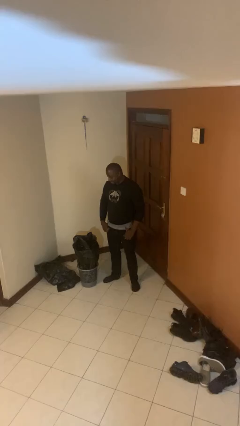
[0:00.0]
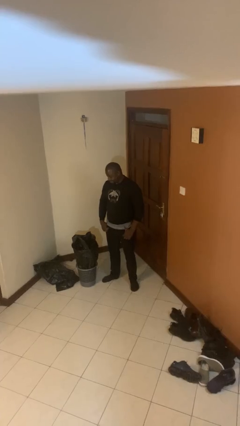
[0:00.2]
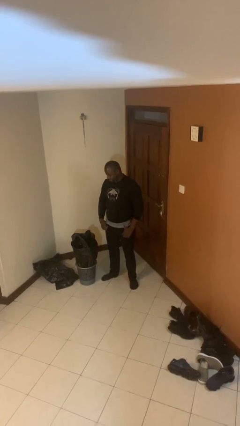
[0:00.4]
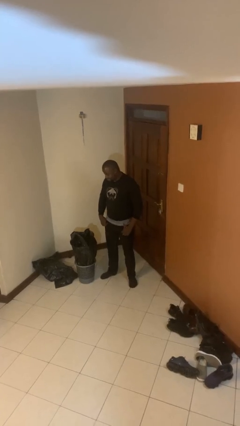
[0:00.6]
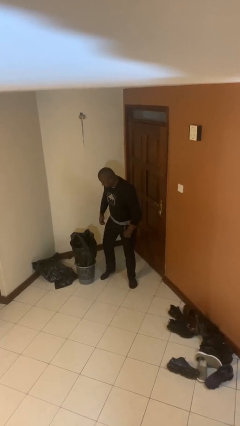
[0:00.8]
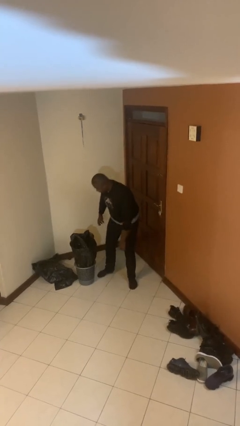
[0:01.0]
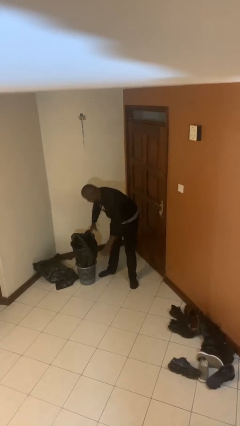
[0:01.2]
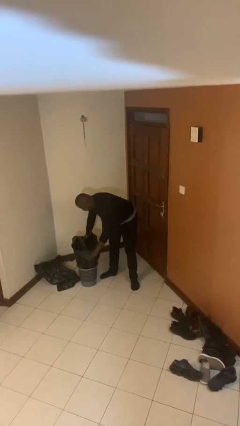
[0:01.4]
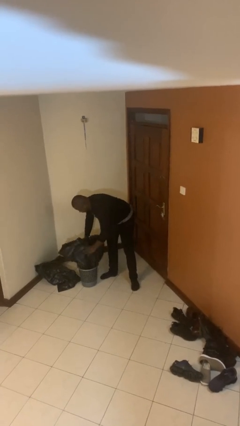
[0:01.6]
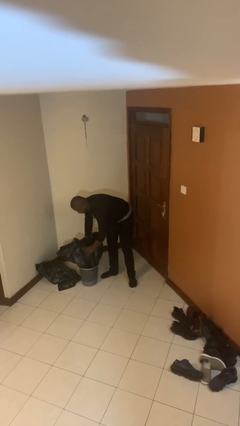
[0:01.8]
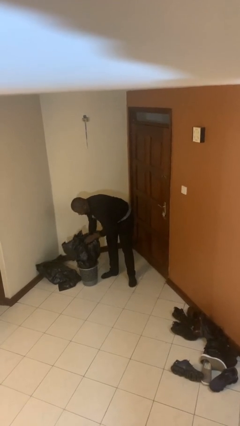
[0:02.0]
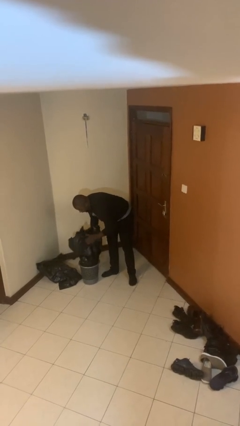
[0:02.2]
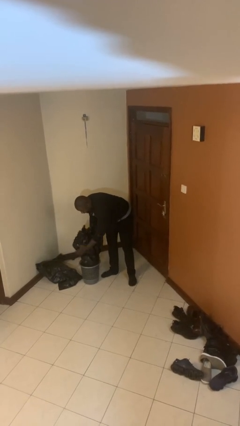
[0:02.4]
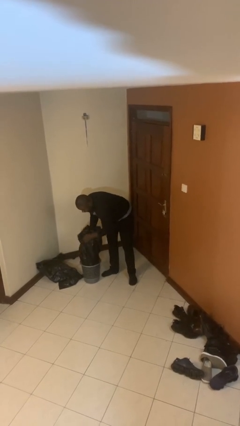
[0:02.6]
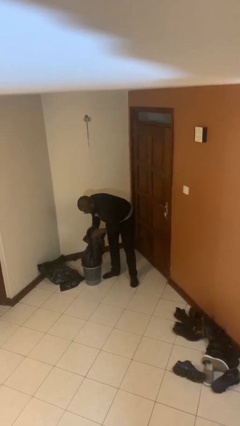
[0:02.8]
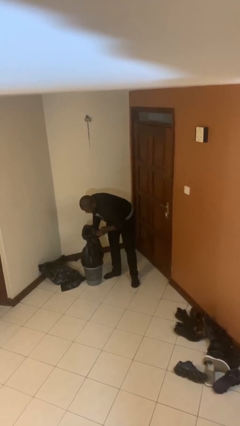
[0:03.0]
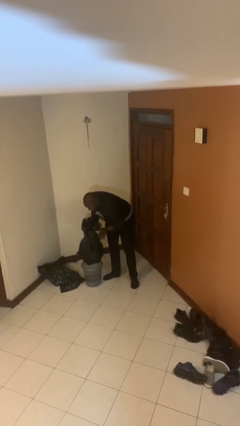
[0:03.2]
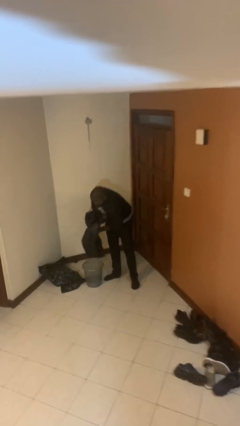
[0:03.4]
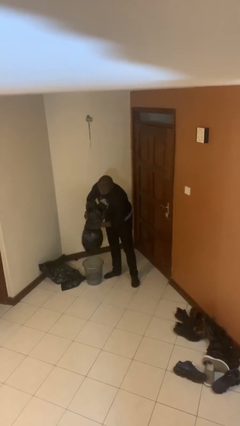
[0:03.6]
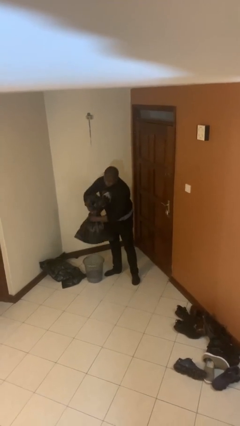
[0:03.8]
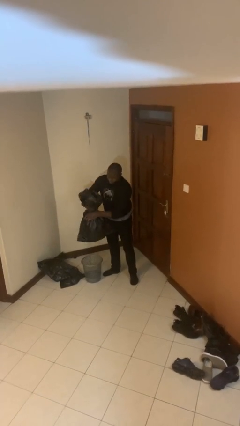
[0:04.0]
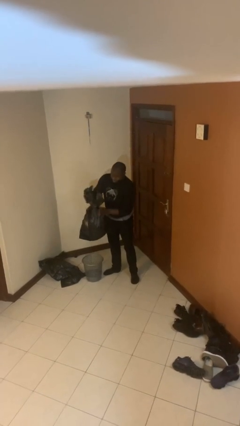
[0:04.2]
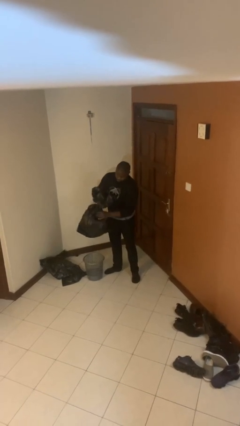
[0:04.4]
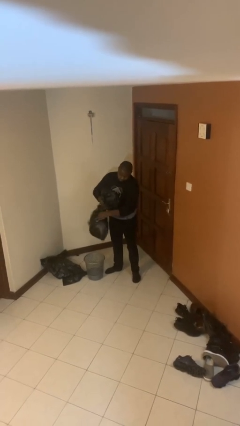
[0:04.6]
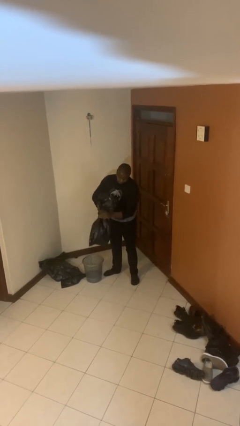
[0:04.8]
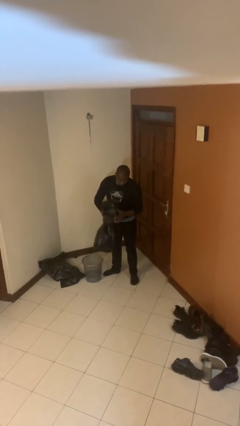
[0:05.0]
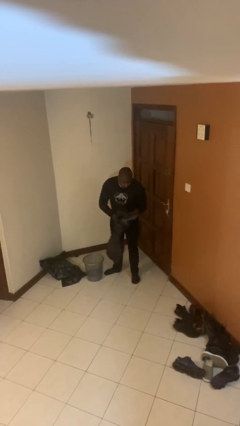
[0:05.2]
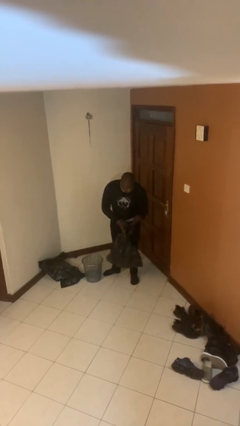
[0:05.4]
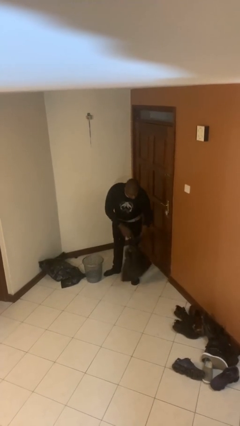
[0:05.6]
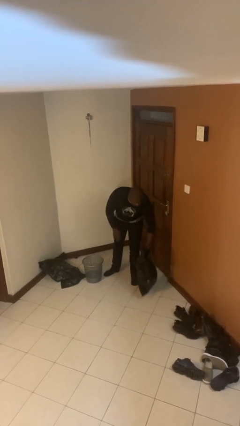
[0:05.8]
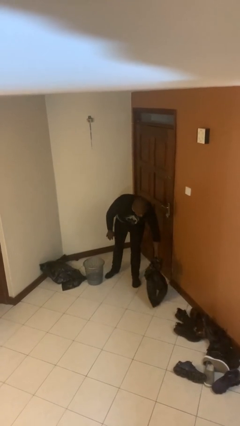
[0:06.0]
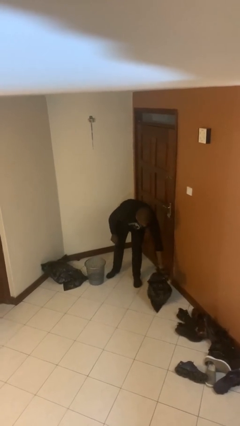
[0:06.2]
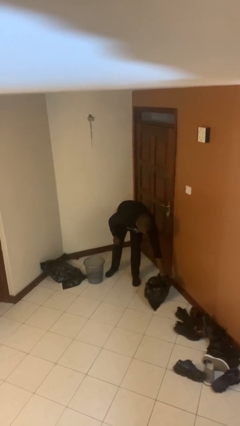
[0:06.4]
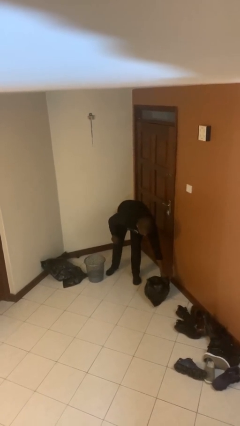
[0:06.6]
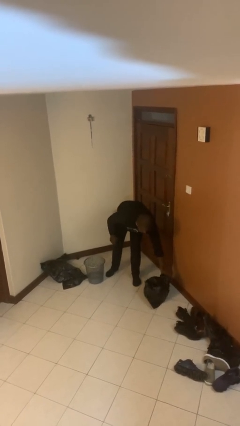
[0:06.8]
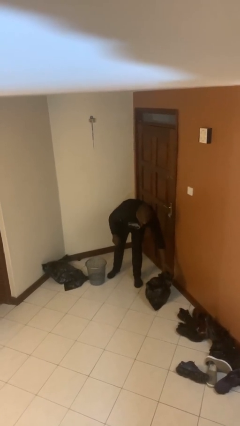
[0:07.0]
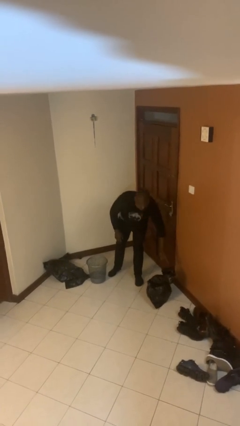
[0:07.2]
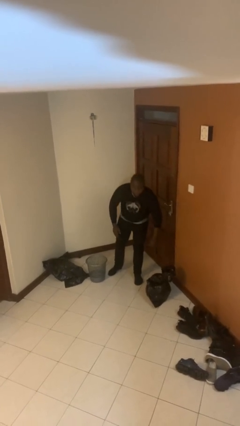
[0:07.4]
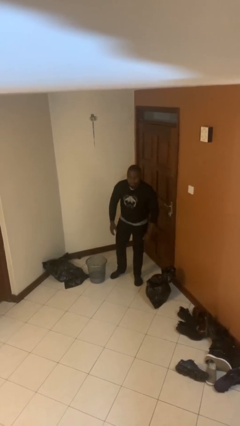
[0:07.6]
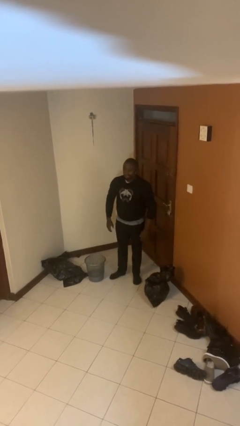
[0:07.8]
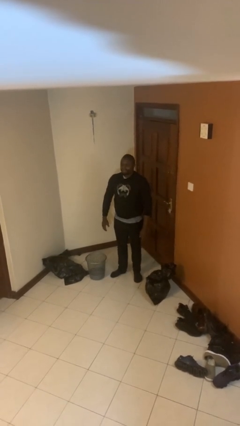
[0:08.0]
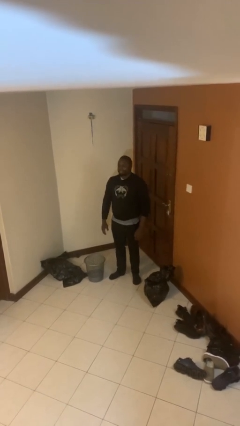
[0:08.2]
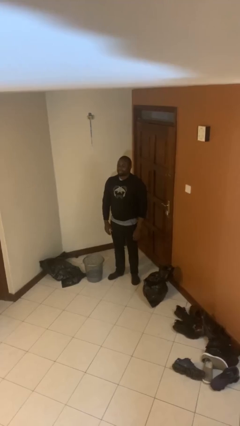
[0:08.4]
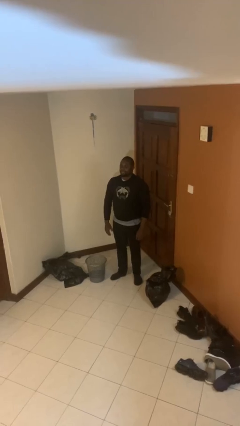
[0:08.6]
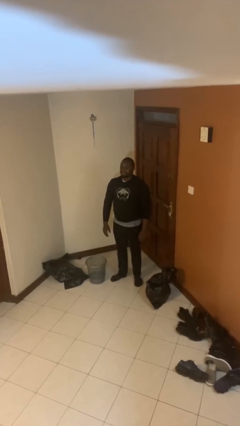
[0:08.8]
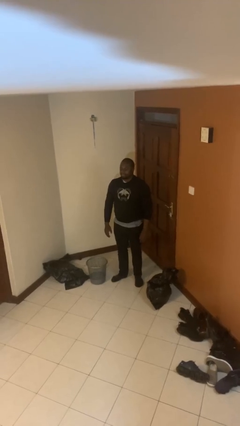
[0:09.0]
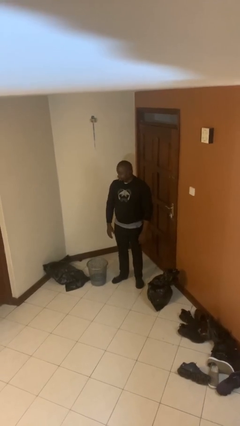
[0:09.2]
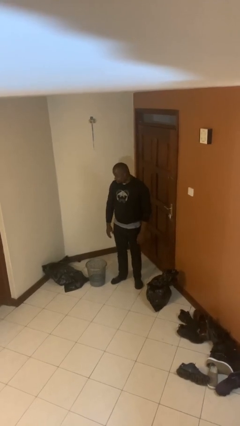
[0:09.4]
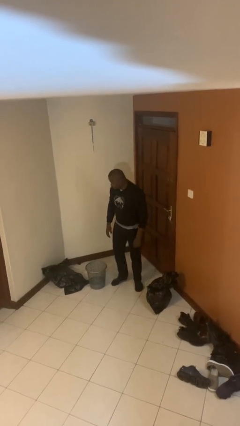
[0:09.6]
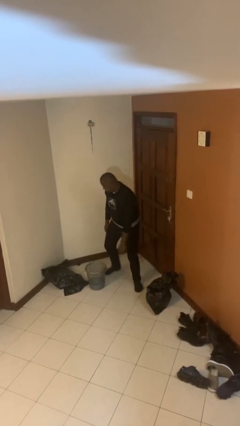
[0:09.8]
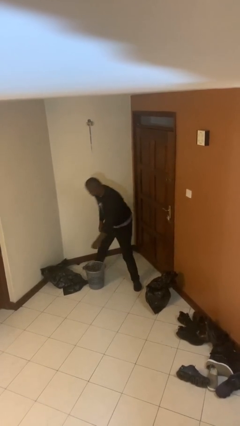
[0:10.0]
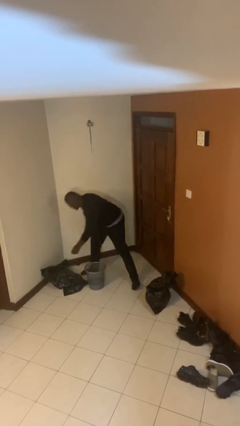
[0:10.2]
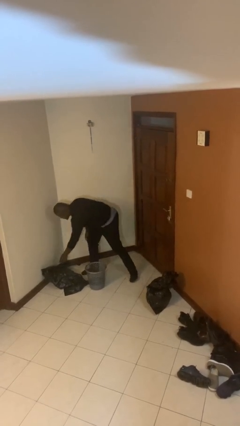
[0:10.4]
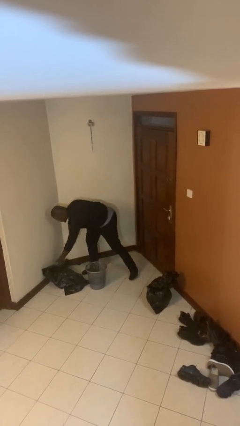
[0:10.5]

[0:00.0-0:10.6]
person removes trashbag from trashcan

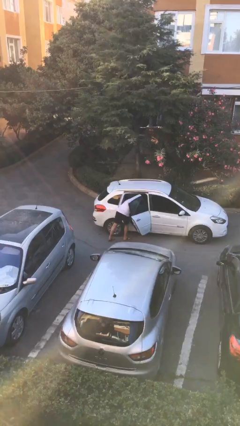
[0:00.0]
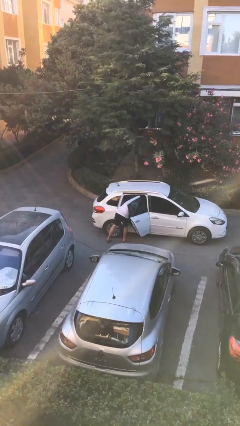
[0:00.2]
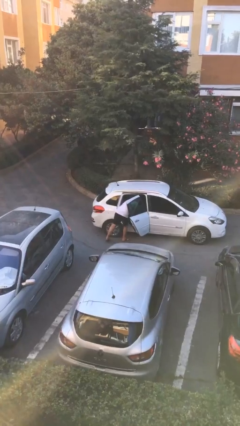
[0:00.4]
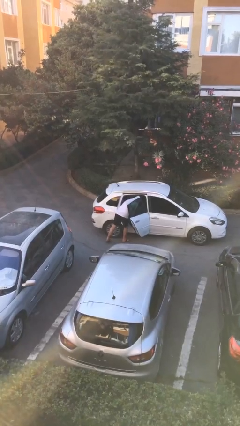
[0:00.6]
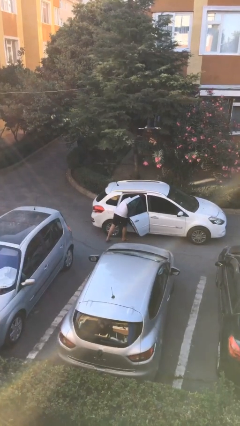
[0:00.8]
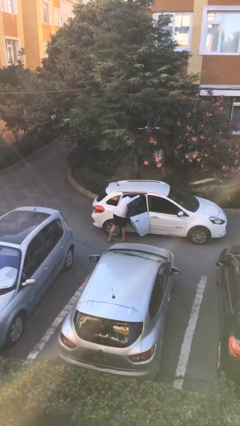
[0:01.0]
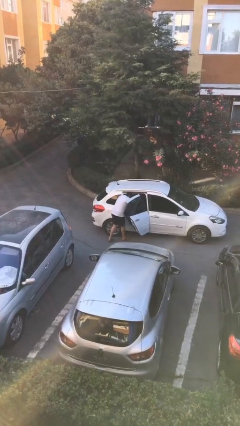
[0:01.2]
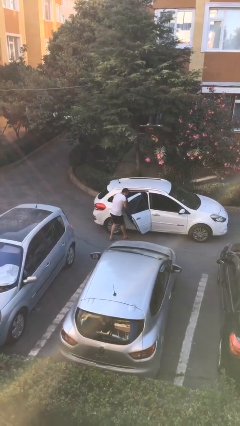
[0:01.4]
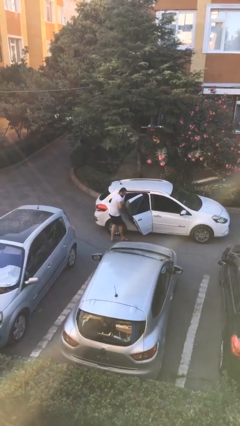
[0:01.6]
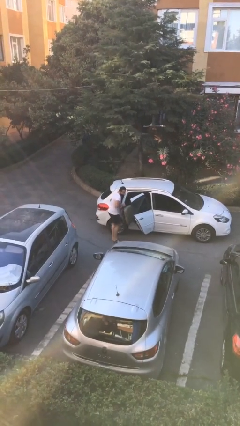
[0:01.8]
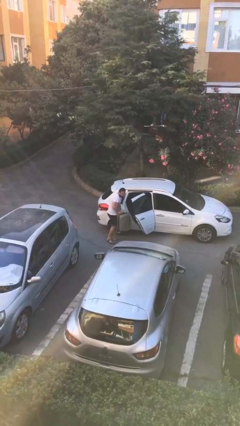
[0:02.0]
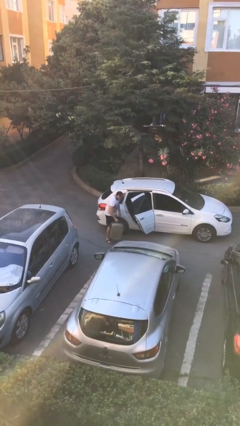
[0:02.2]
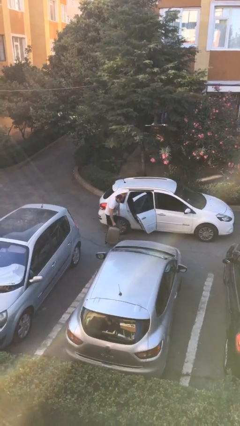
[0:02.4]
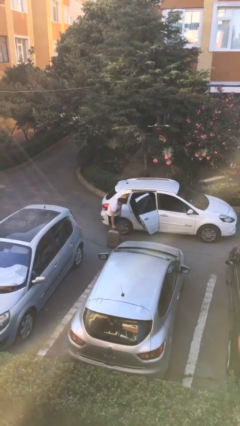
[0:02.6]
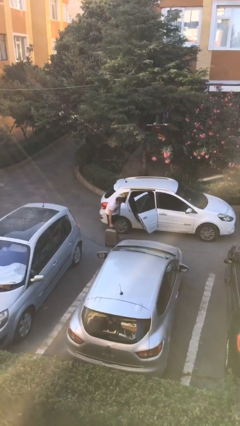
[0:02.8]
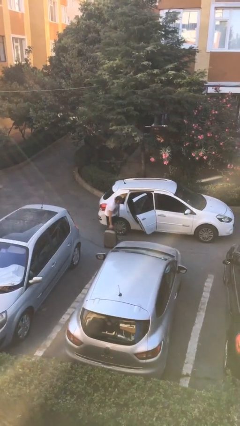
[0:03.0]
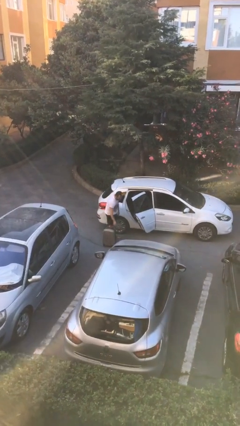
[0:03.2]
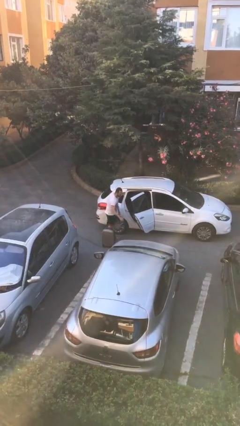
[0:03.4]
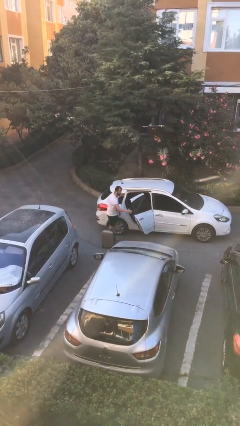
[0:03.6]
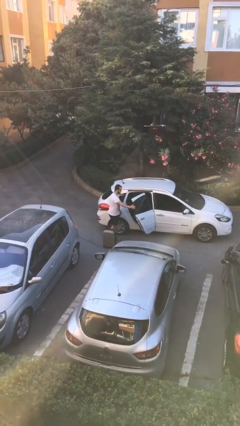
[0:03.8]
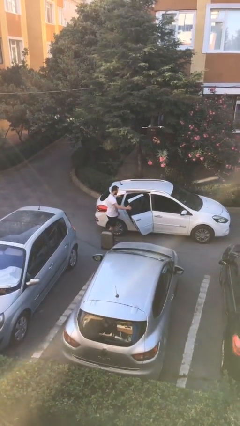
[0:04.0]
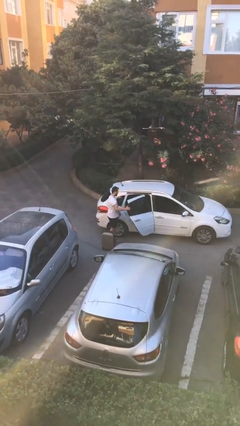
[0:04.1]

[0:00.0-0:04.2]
person unloads car

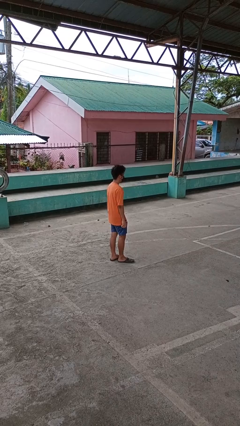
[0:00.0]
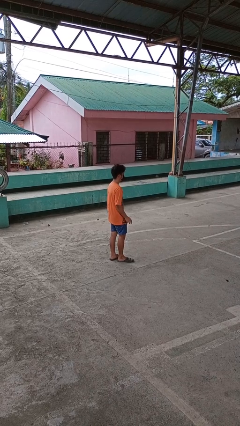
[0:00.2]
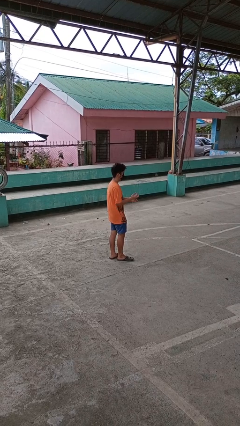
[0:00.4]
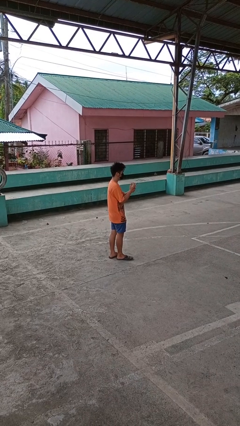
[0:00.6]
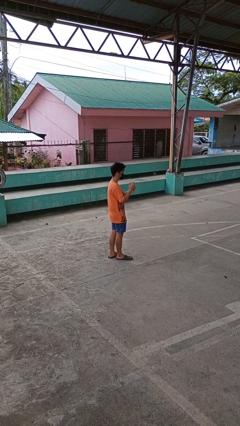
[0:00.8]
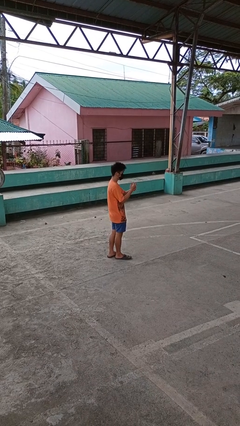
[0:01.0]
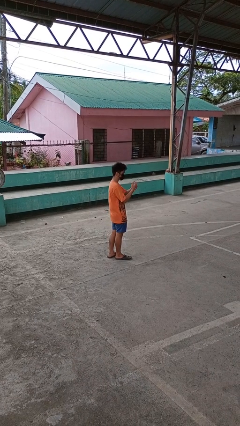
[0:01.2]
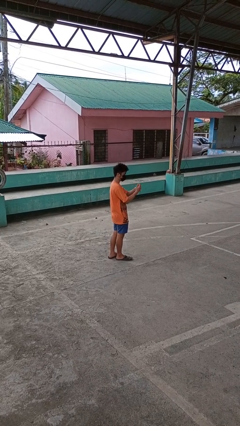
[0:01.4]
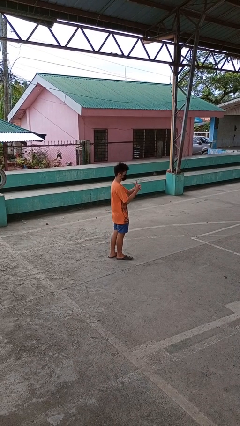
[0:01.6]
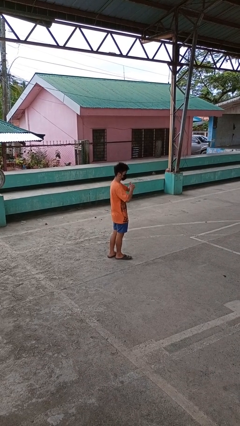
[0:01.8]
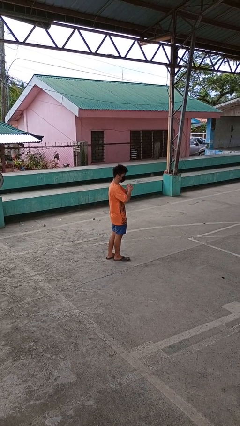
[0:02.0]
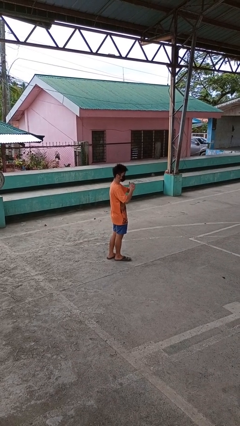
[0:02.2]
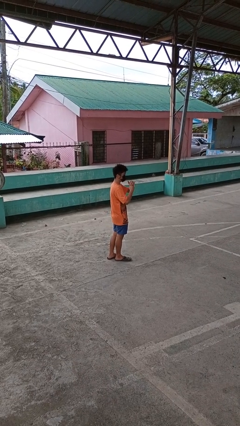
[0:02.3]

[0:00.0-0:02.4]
person cracks knuckles

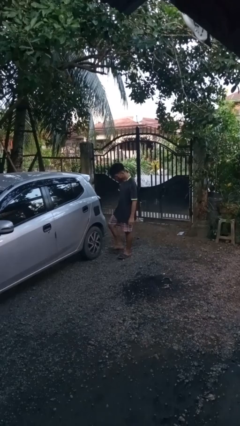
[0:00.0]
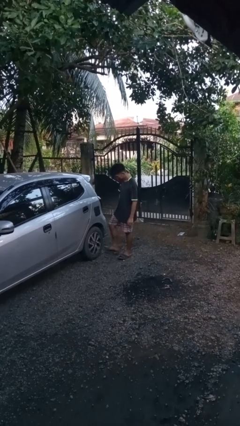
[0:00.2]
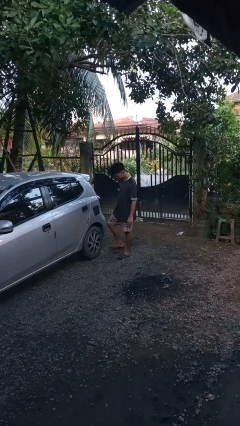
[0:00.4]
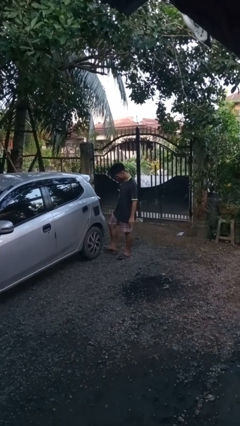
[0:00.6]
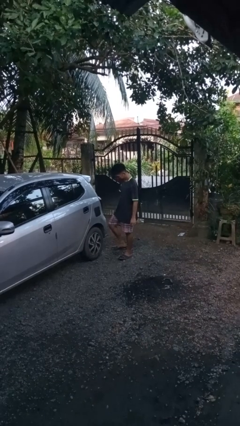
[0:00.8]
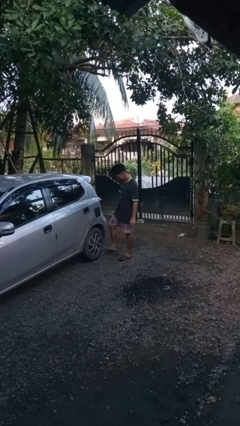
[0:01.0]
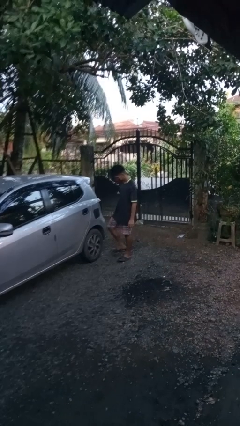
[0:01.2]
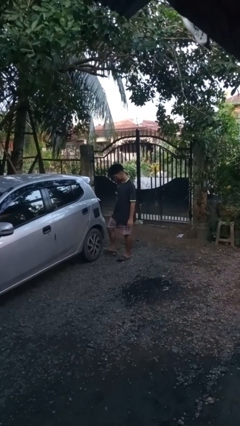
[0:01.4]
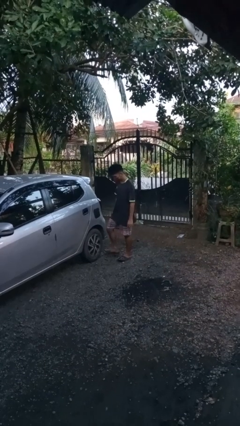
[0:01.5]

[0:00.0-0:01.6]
person kicks car tires
